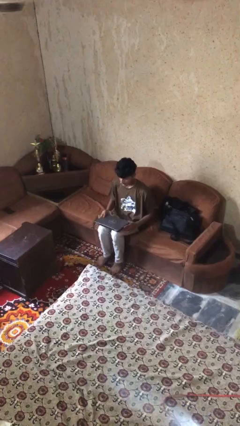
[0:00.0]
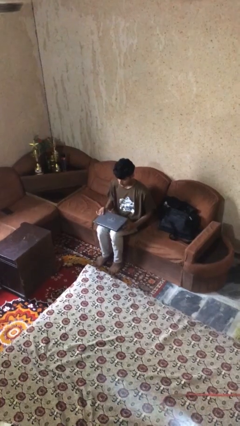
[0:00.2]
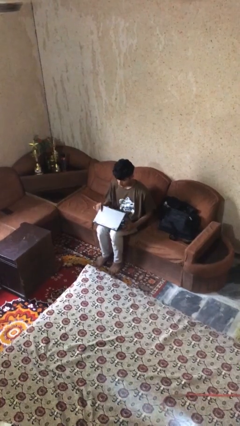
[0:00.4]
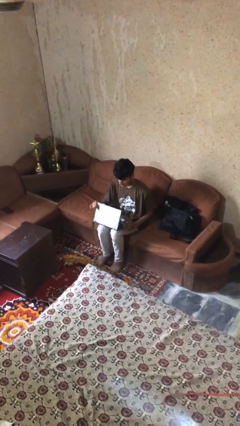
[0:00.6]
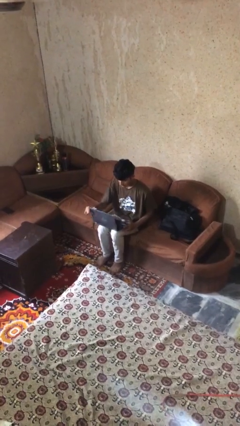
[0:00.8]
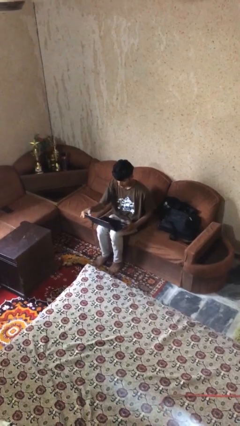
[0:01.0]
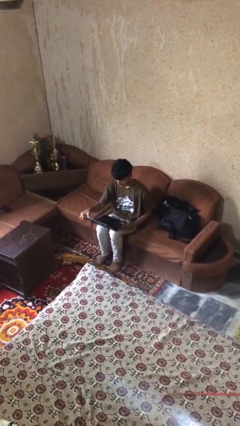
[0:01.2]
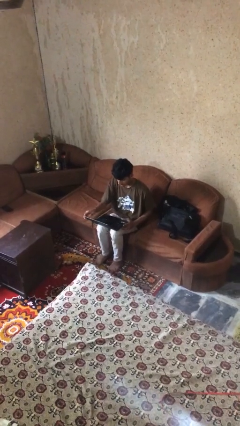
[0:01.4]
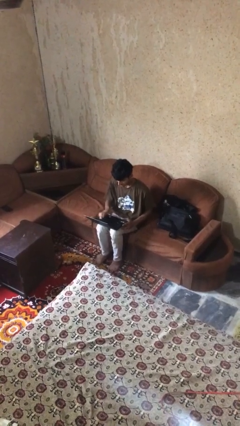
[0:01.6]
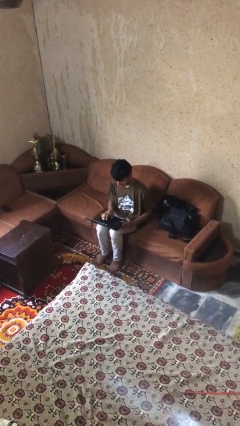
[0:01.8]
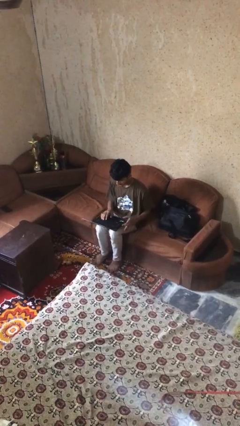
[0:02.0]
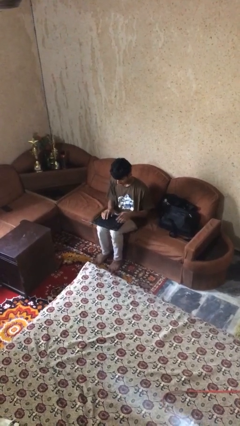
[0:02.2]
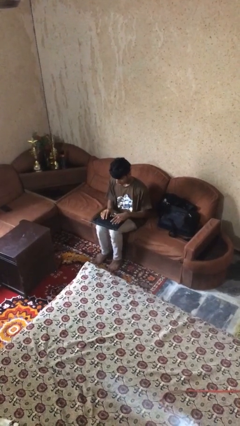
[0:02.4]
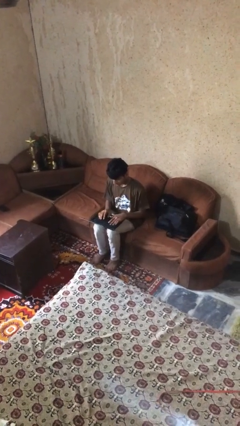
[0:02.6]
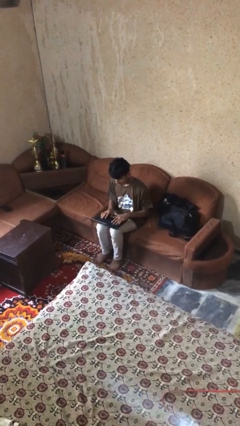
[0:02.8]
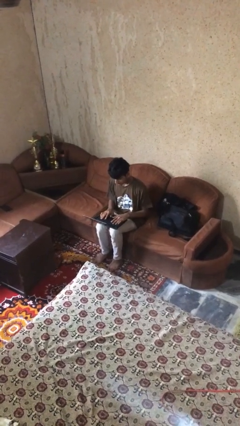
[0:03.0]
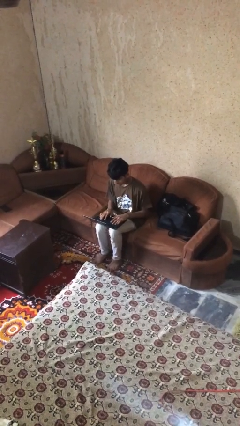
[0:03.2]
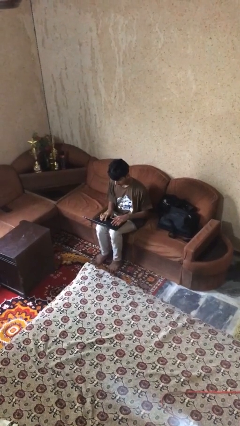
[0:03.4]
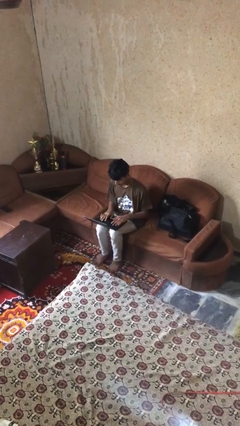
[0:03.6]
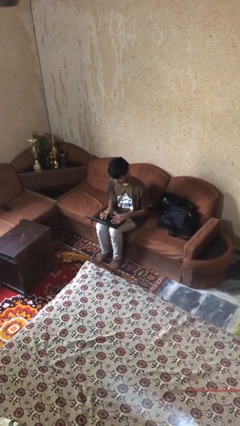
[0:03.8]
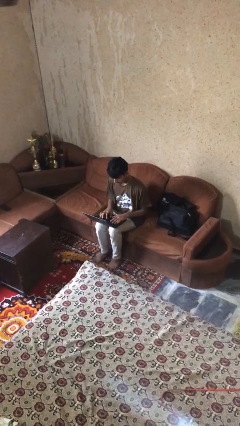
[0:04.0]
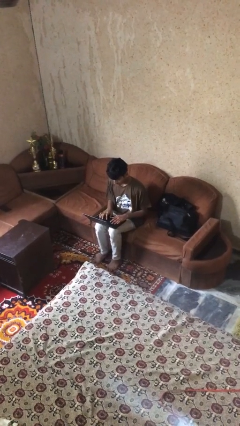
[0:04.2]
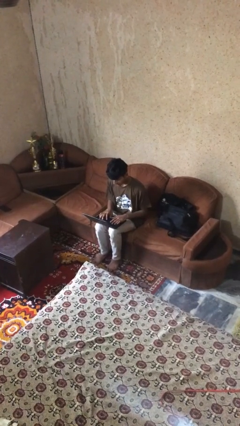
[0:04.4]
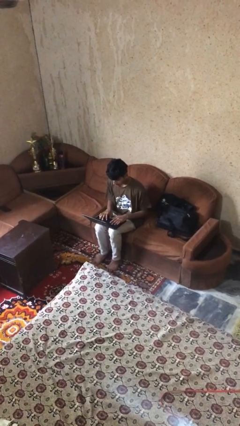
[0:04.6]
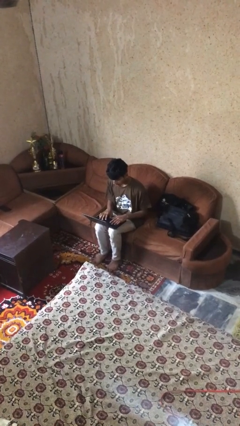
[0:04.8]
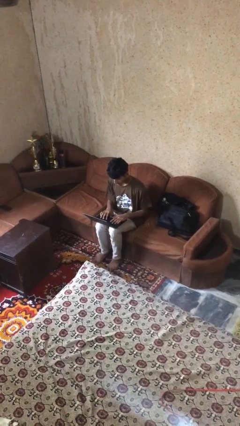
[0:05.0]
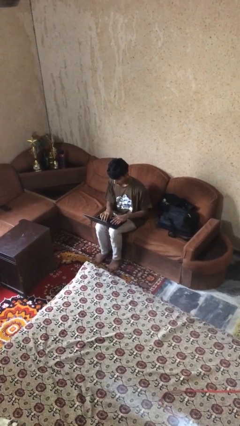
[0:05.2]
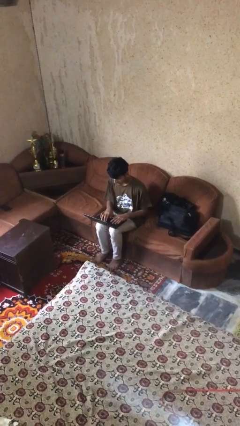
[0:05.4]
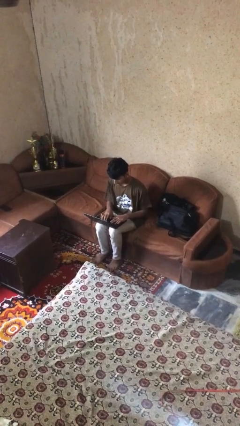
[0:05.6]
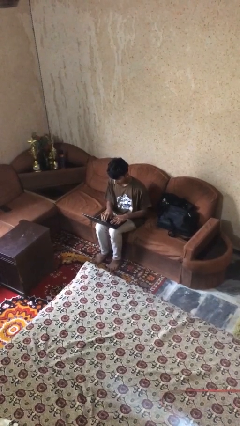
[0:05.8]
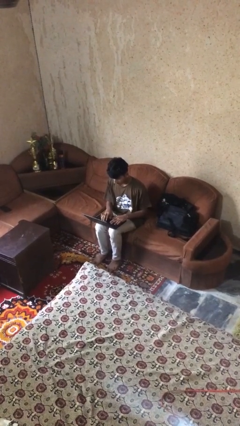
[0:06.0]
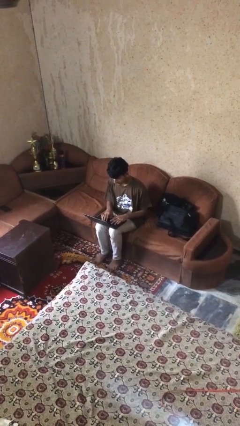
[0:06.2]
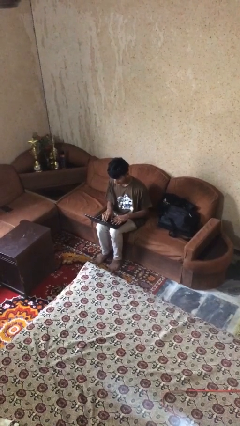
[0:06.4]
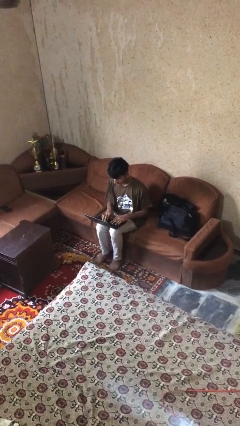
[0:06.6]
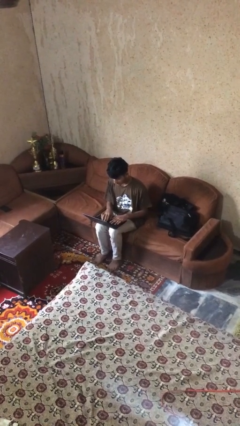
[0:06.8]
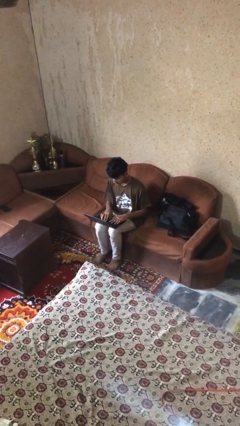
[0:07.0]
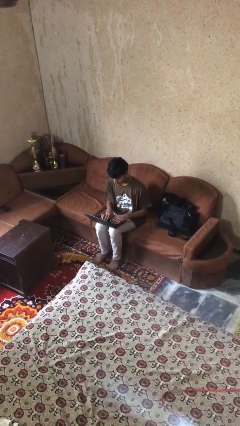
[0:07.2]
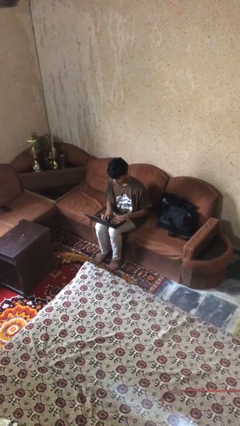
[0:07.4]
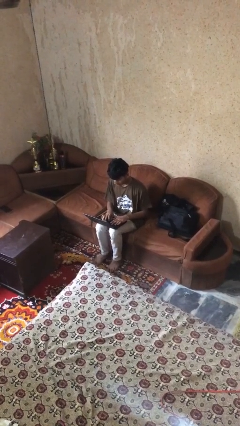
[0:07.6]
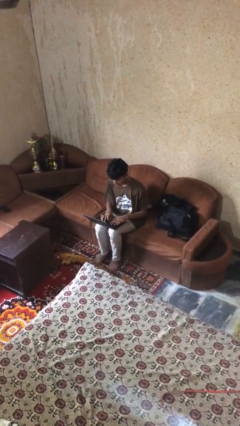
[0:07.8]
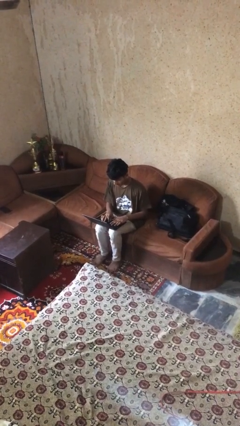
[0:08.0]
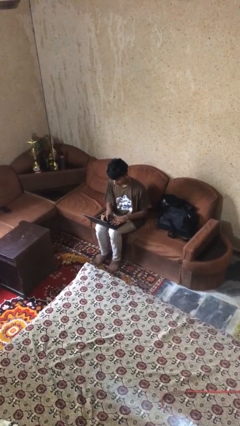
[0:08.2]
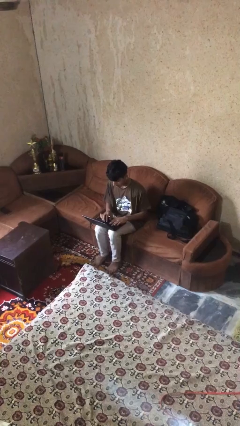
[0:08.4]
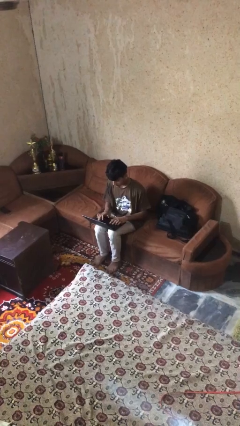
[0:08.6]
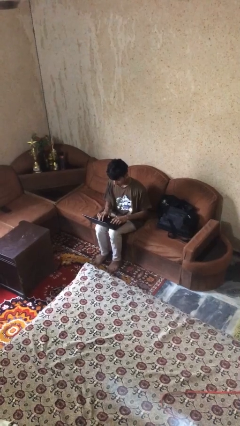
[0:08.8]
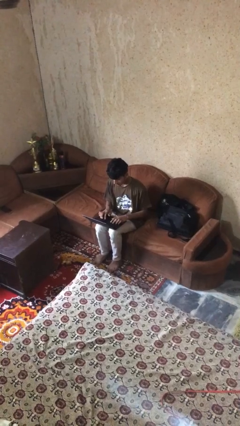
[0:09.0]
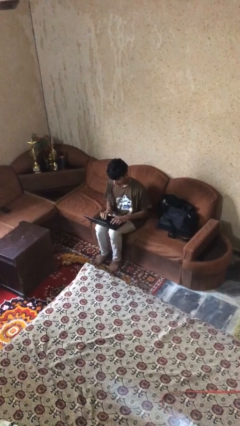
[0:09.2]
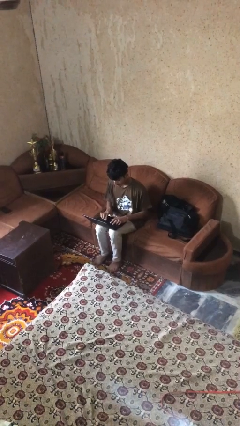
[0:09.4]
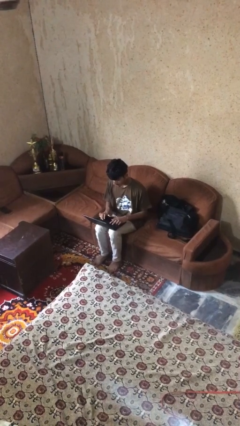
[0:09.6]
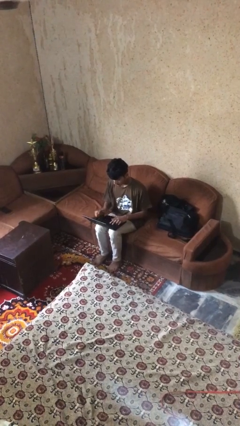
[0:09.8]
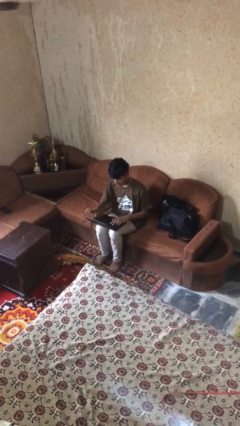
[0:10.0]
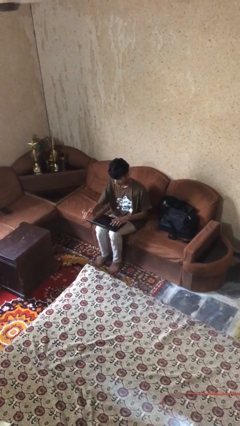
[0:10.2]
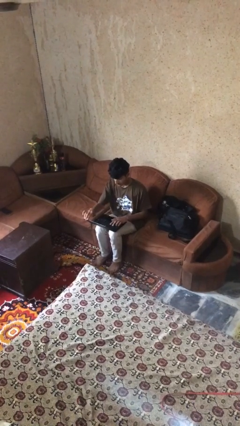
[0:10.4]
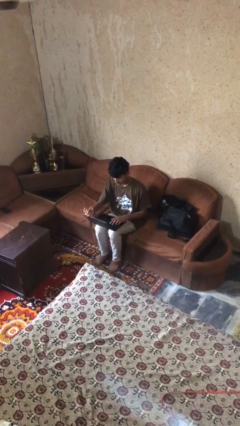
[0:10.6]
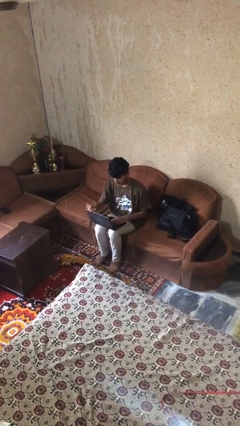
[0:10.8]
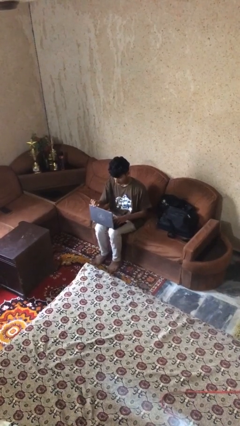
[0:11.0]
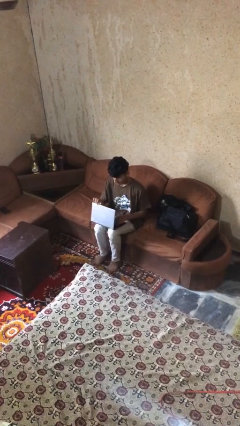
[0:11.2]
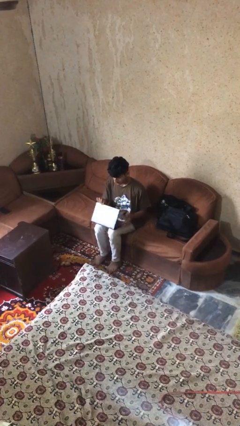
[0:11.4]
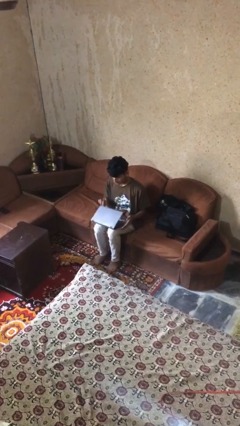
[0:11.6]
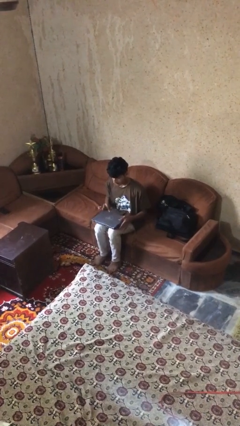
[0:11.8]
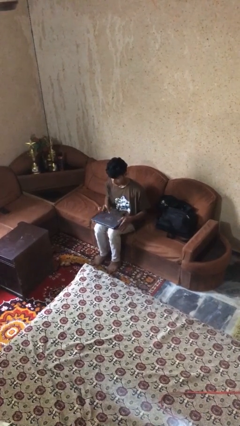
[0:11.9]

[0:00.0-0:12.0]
person interacts with laptop

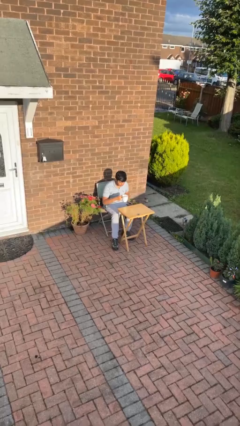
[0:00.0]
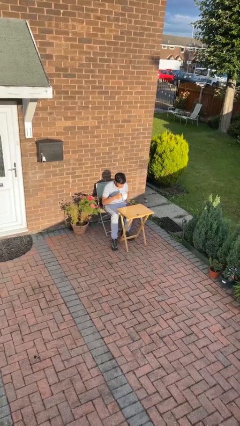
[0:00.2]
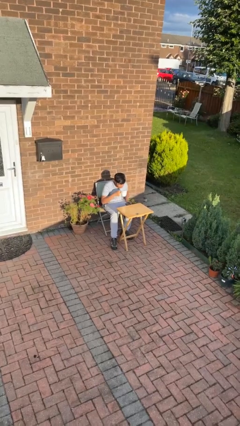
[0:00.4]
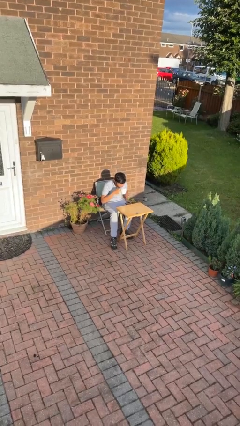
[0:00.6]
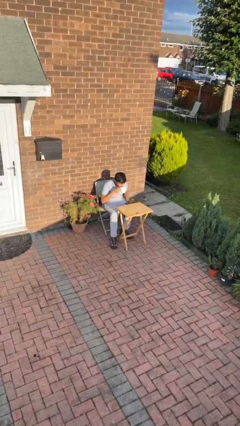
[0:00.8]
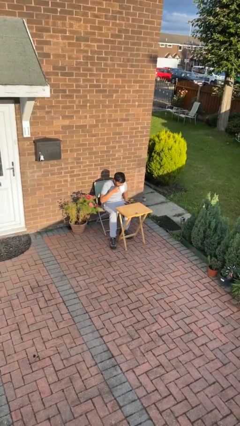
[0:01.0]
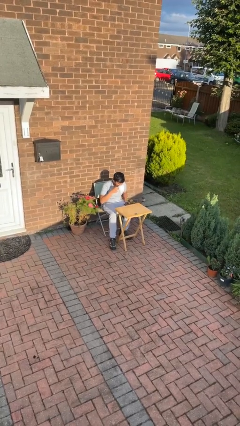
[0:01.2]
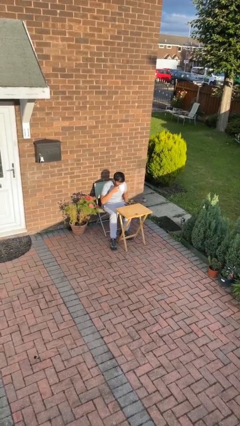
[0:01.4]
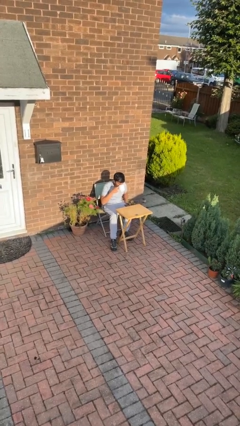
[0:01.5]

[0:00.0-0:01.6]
person drinks from mug

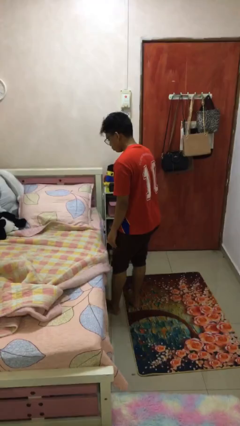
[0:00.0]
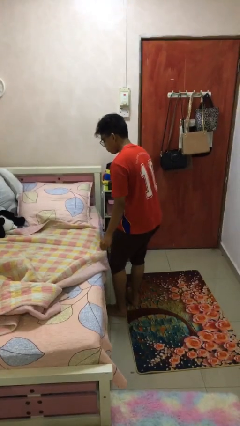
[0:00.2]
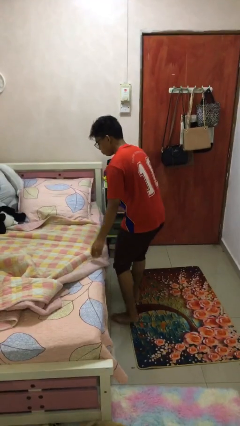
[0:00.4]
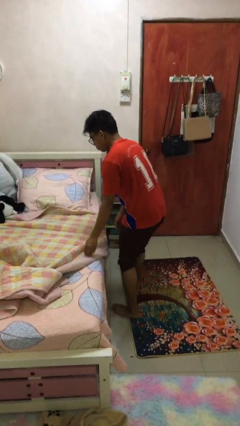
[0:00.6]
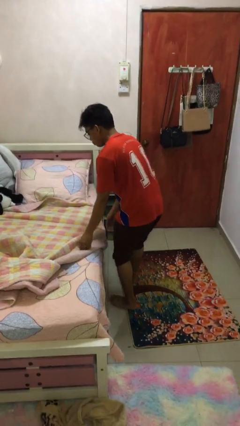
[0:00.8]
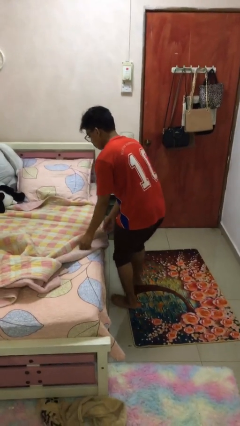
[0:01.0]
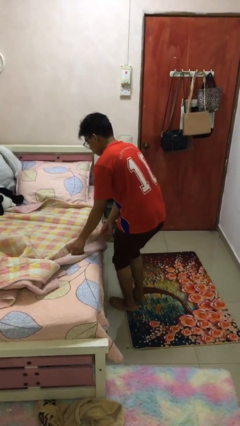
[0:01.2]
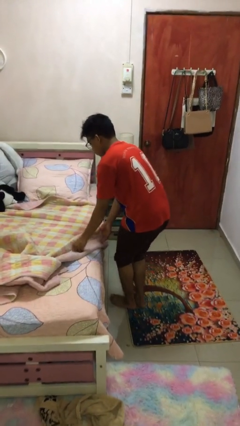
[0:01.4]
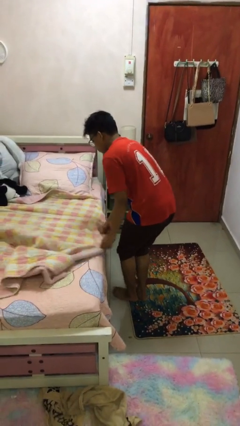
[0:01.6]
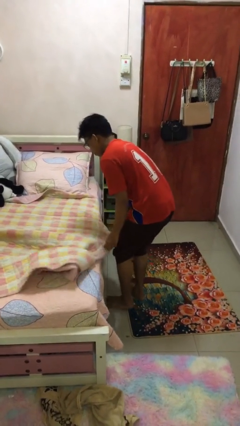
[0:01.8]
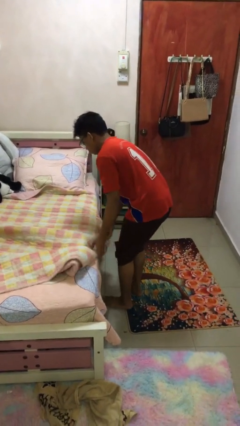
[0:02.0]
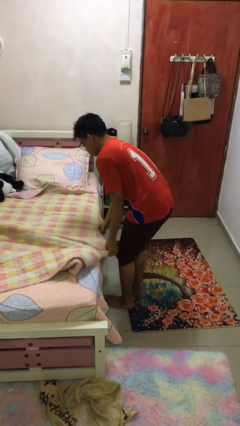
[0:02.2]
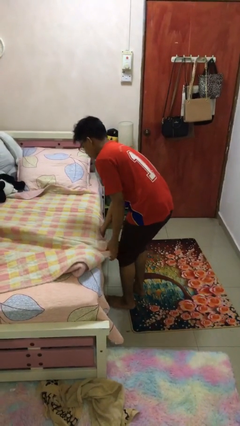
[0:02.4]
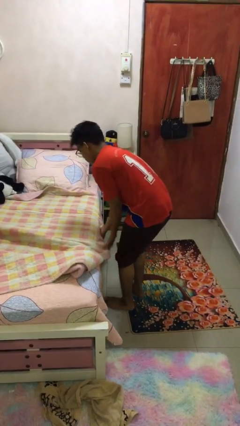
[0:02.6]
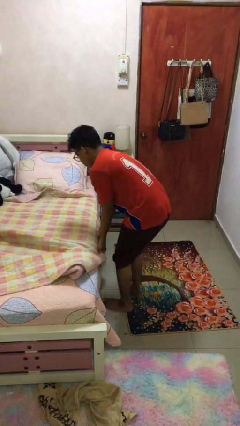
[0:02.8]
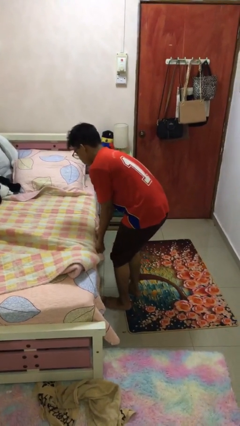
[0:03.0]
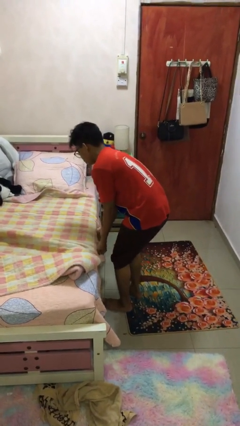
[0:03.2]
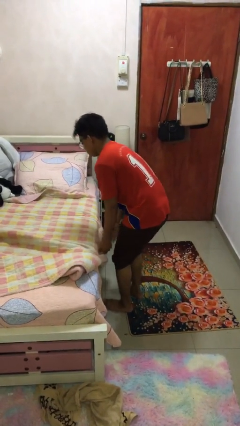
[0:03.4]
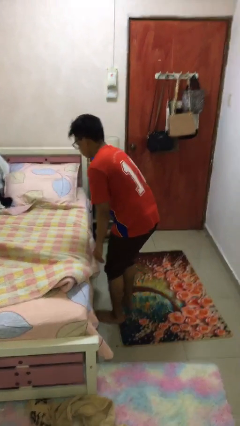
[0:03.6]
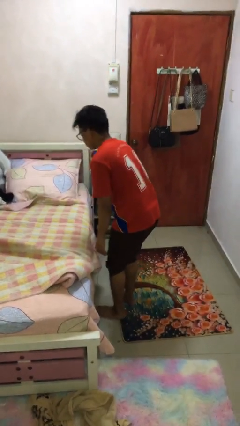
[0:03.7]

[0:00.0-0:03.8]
person makes bed

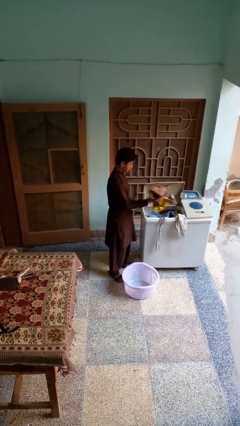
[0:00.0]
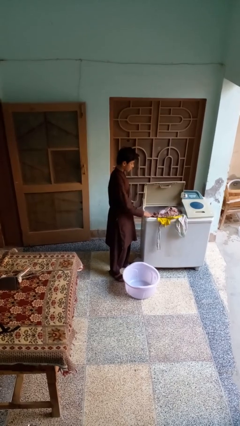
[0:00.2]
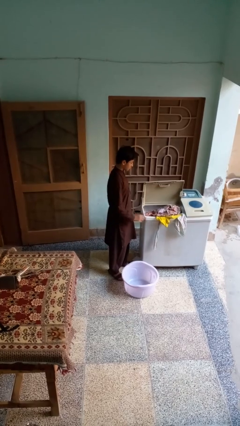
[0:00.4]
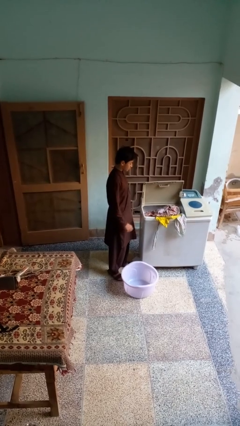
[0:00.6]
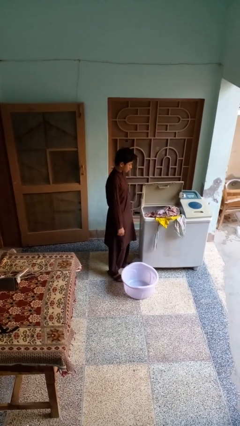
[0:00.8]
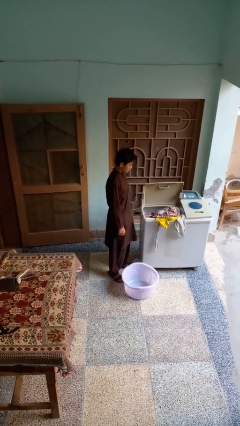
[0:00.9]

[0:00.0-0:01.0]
person unloads clotheswasher
